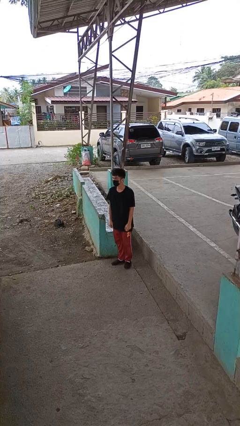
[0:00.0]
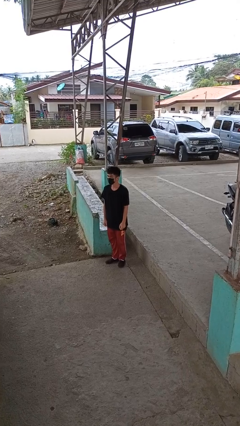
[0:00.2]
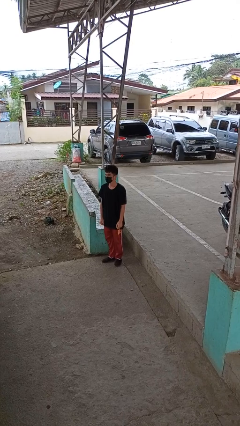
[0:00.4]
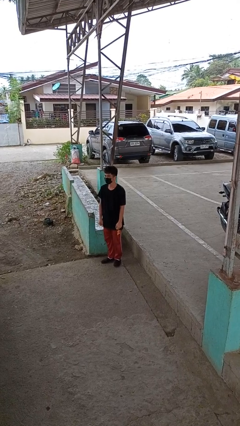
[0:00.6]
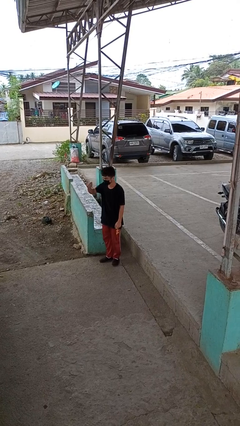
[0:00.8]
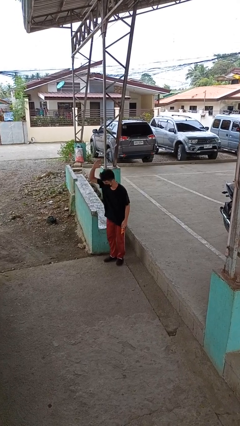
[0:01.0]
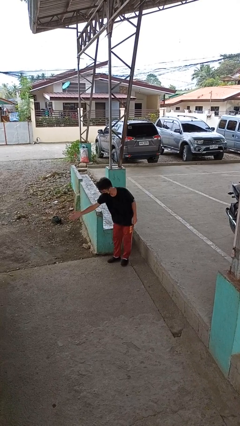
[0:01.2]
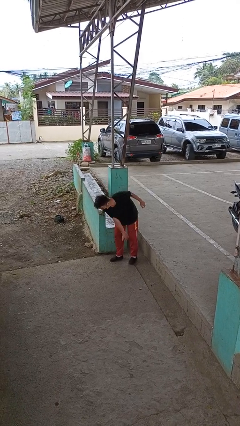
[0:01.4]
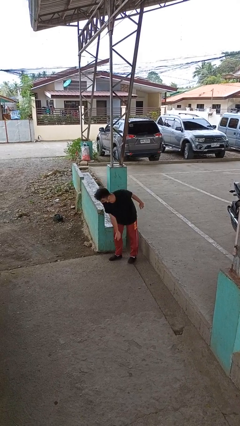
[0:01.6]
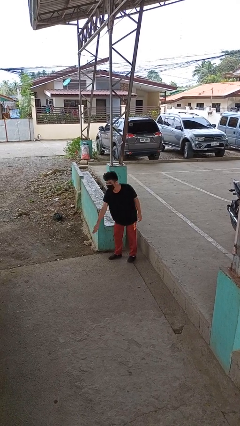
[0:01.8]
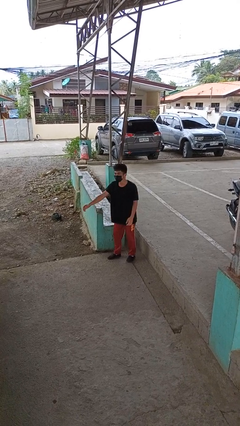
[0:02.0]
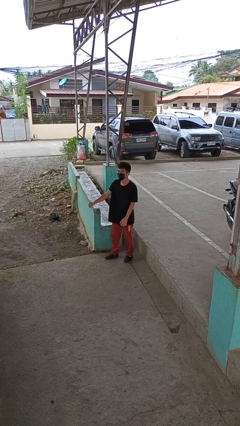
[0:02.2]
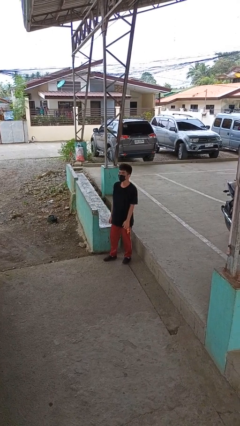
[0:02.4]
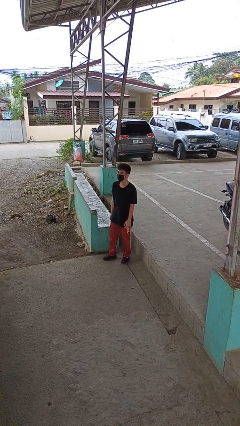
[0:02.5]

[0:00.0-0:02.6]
person karate chop

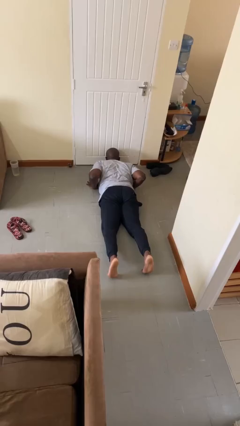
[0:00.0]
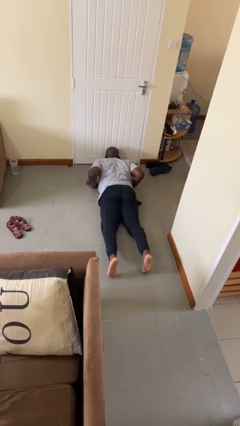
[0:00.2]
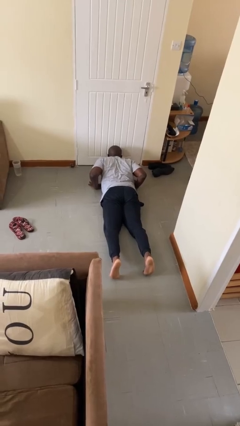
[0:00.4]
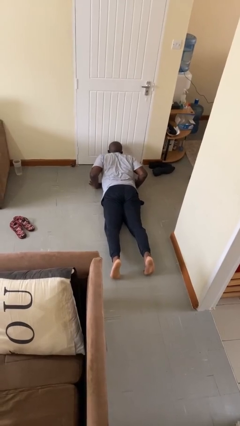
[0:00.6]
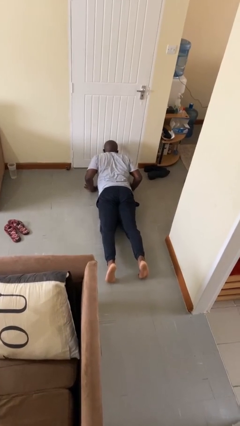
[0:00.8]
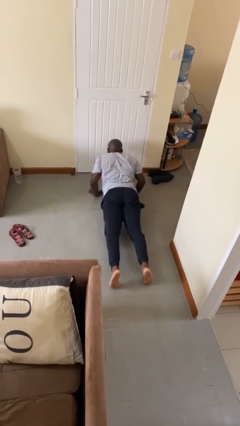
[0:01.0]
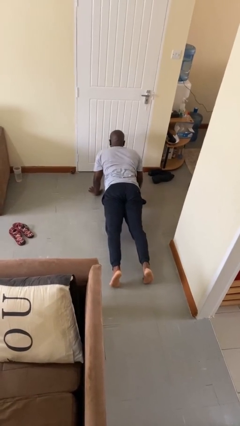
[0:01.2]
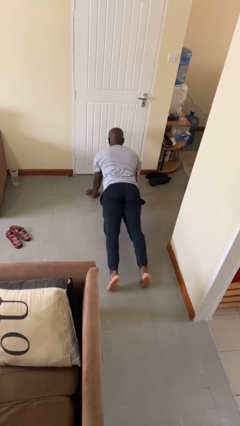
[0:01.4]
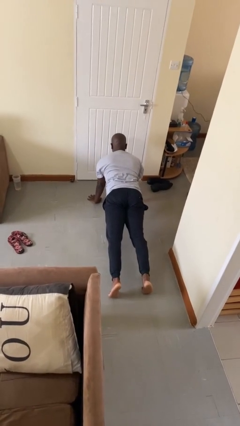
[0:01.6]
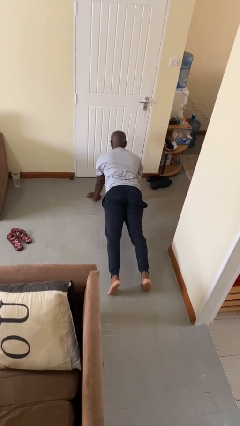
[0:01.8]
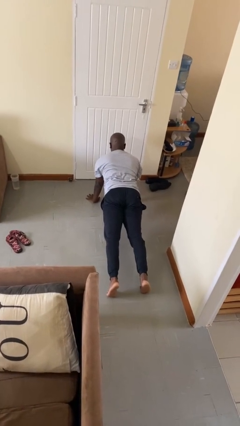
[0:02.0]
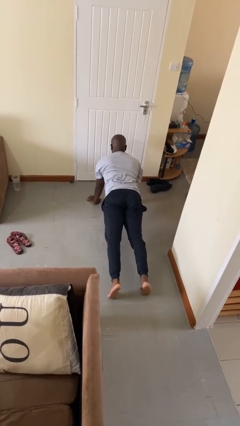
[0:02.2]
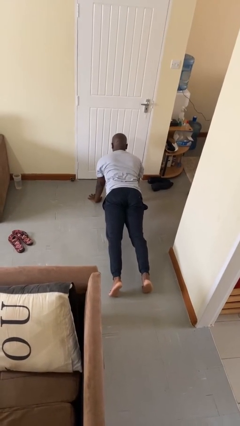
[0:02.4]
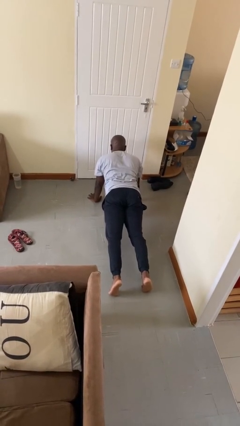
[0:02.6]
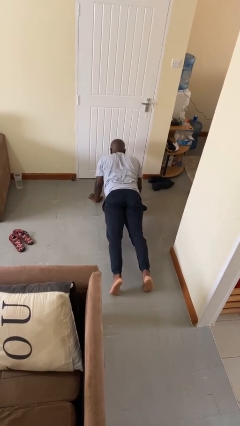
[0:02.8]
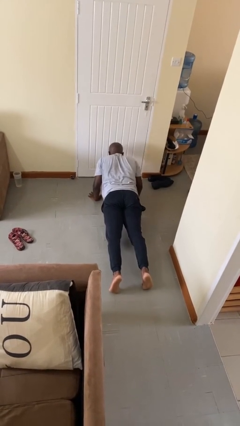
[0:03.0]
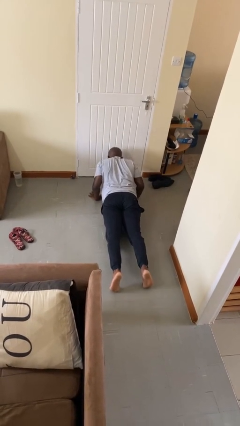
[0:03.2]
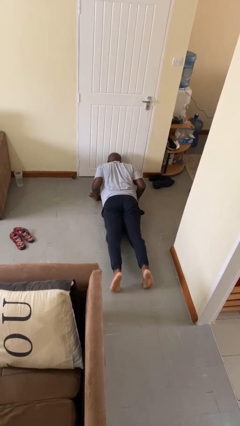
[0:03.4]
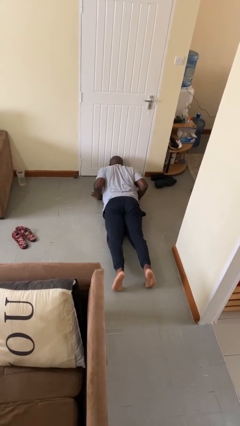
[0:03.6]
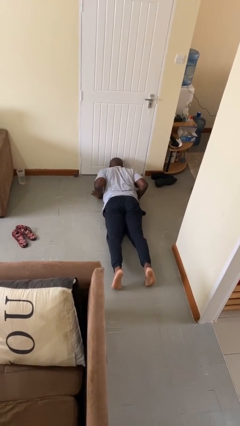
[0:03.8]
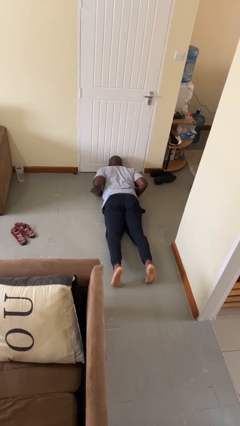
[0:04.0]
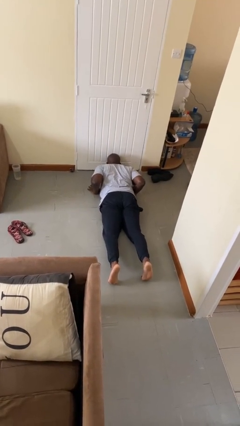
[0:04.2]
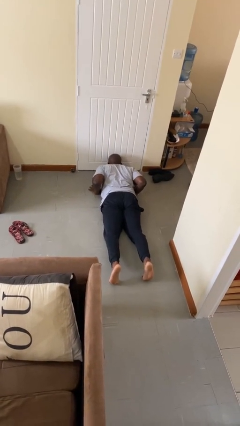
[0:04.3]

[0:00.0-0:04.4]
person exercises with pushup

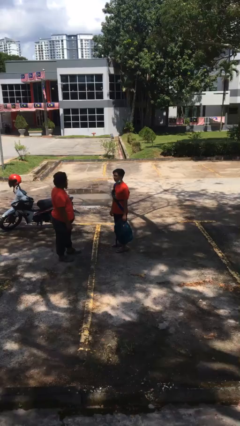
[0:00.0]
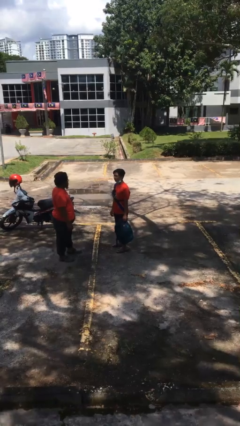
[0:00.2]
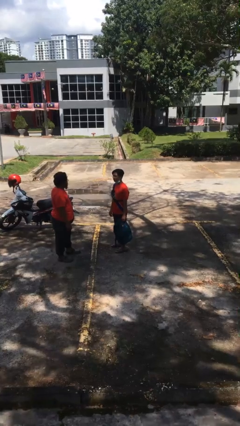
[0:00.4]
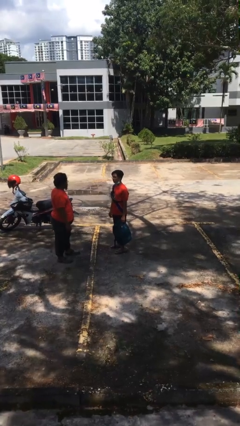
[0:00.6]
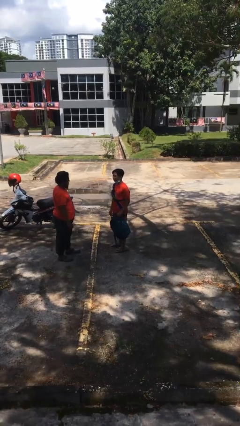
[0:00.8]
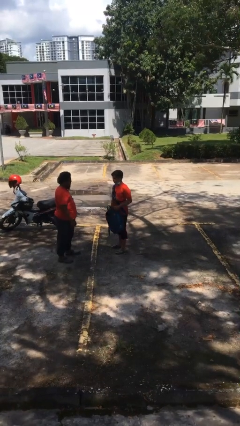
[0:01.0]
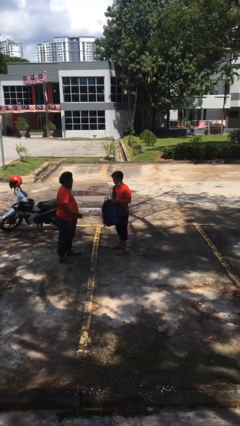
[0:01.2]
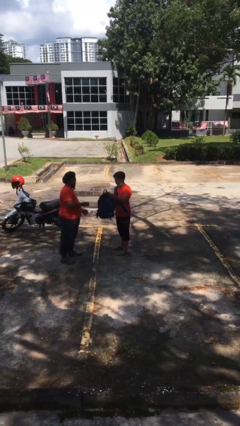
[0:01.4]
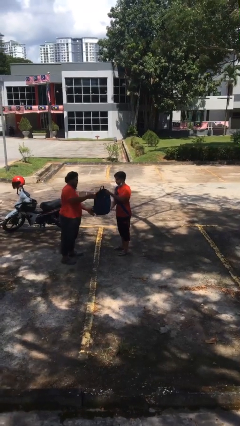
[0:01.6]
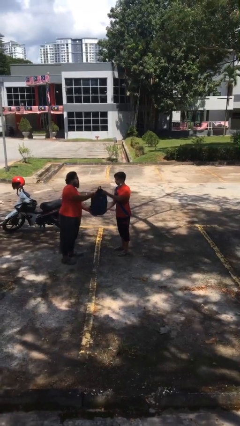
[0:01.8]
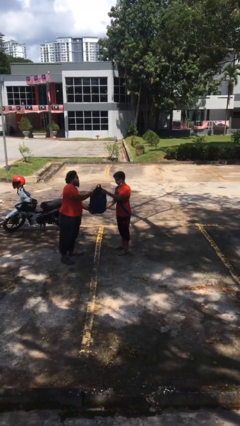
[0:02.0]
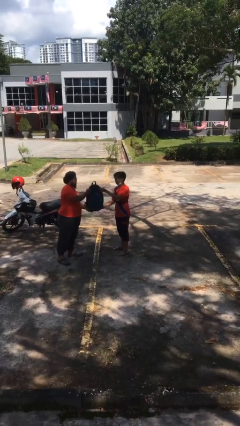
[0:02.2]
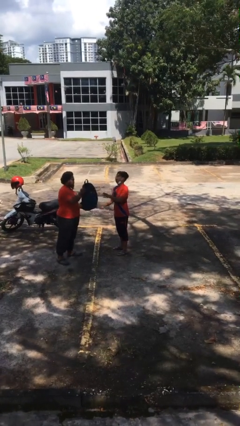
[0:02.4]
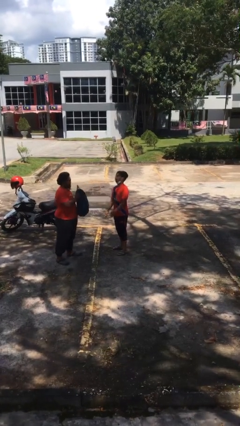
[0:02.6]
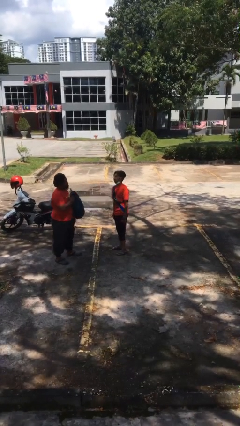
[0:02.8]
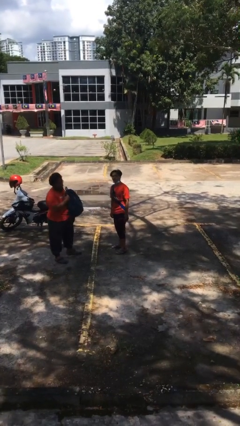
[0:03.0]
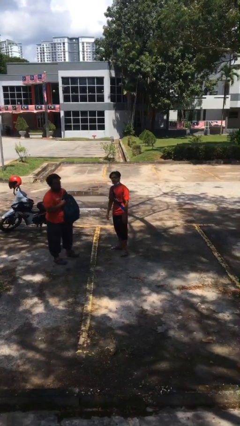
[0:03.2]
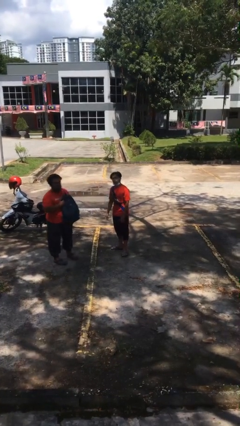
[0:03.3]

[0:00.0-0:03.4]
person transfers object to person

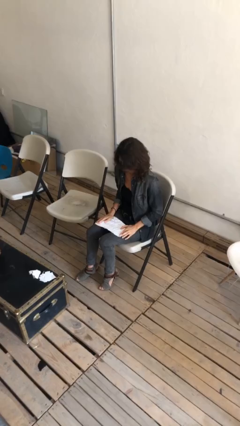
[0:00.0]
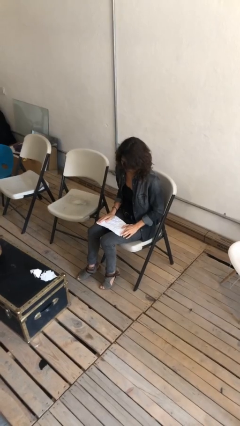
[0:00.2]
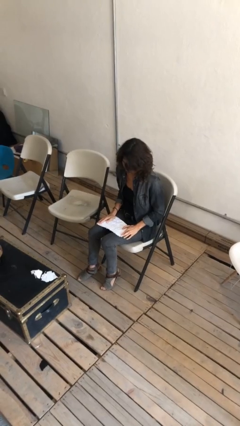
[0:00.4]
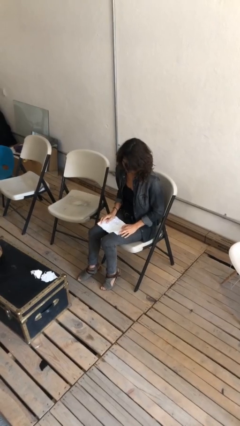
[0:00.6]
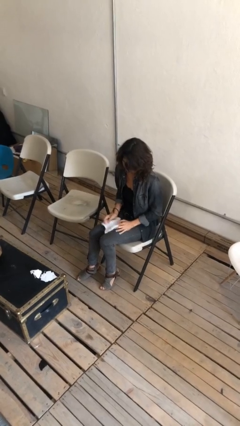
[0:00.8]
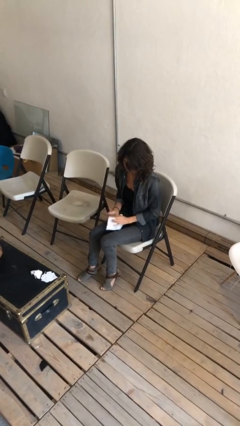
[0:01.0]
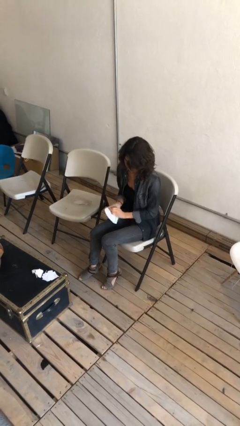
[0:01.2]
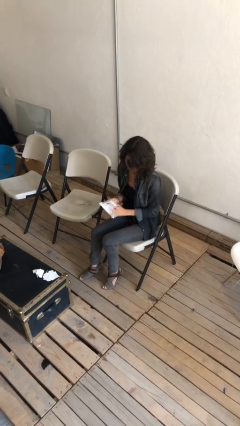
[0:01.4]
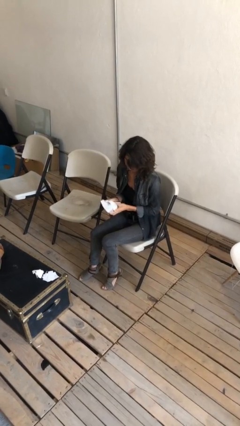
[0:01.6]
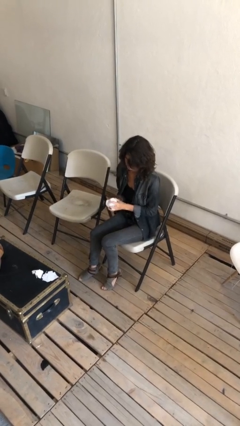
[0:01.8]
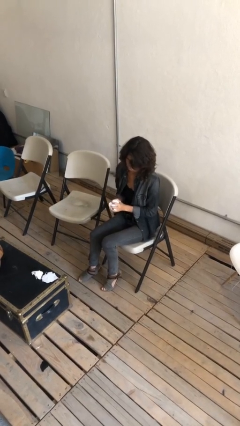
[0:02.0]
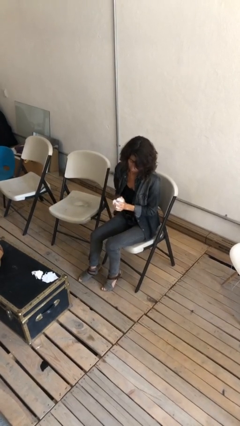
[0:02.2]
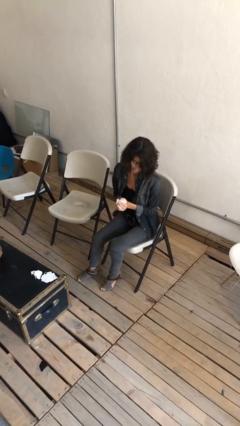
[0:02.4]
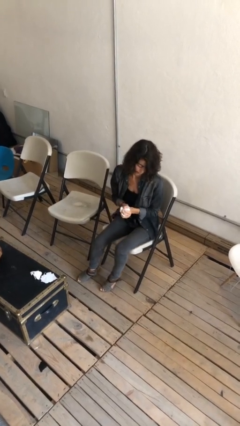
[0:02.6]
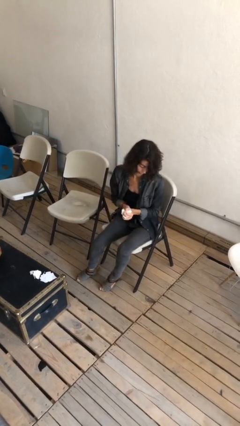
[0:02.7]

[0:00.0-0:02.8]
person crumples paper

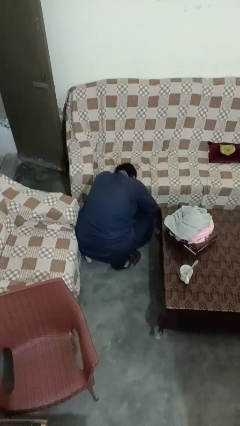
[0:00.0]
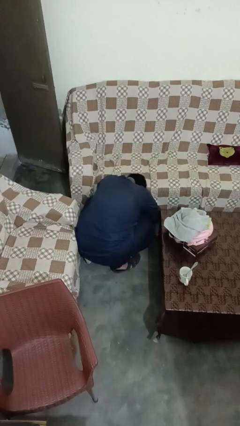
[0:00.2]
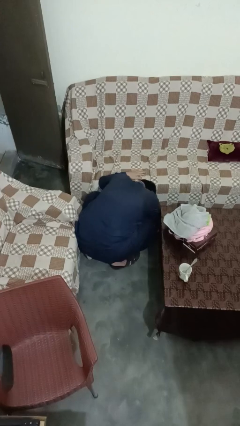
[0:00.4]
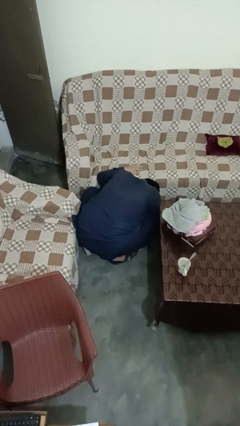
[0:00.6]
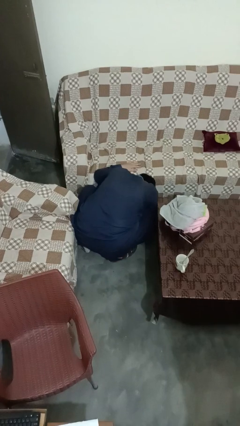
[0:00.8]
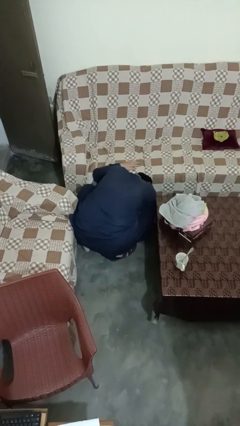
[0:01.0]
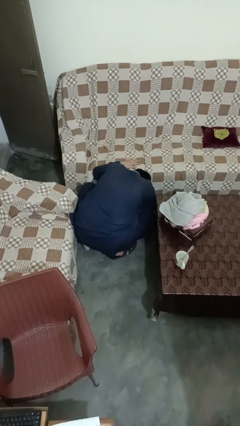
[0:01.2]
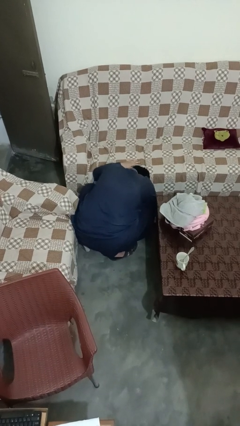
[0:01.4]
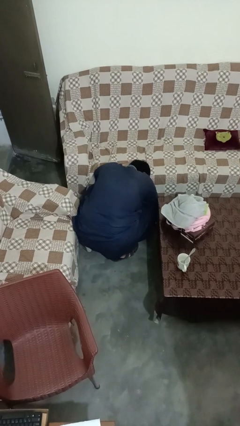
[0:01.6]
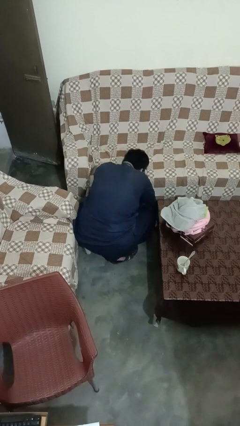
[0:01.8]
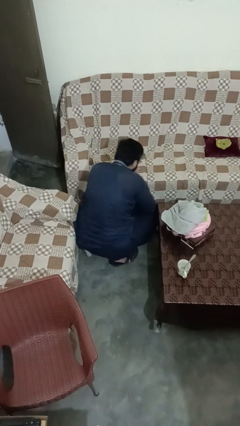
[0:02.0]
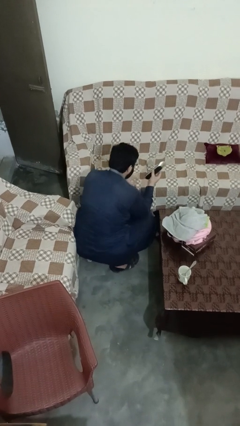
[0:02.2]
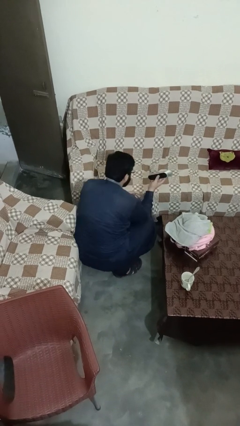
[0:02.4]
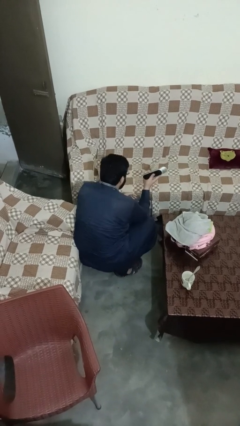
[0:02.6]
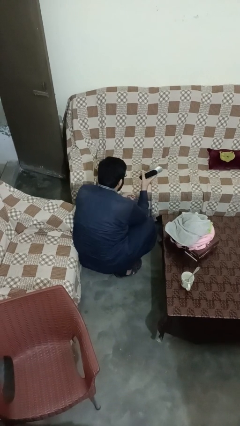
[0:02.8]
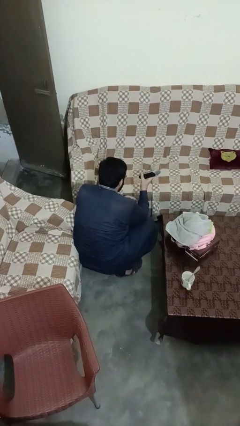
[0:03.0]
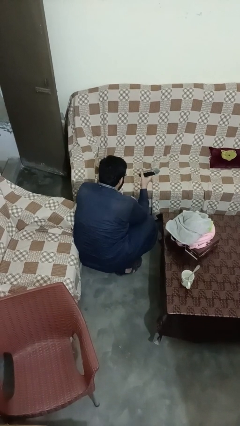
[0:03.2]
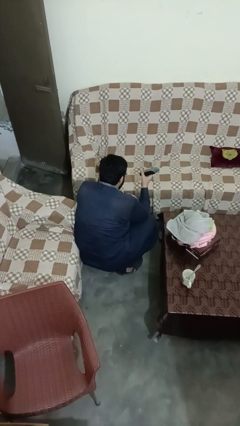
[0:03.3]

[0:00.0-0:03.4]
person searches under couch

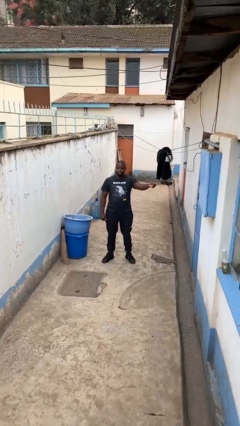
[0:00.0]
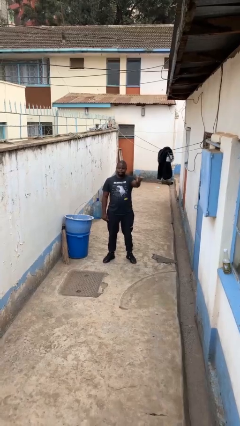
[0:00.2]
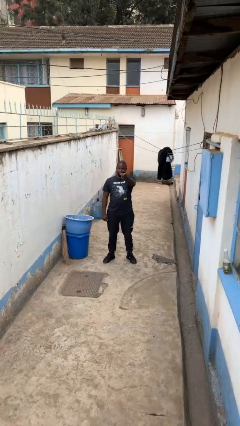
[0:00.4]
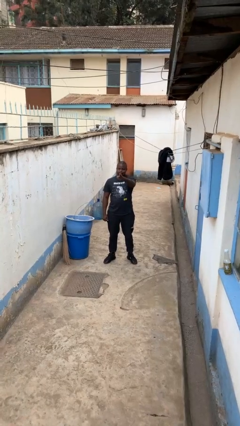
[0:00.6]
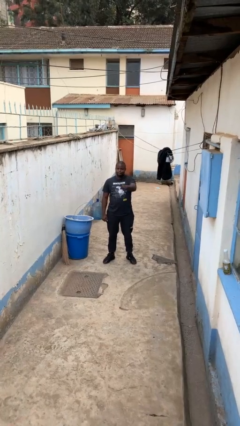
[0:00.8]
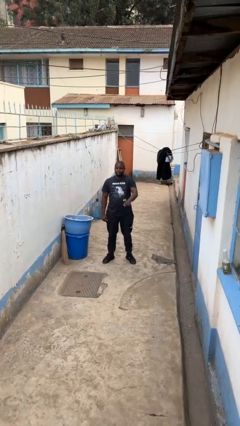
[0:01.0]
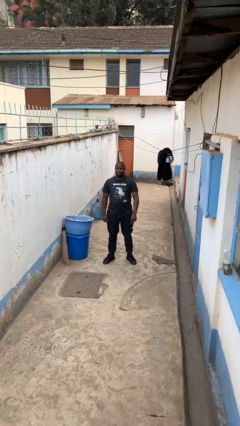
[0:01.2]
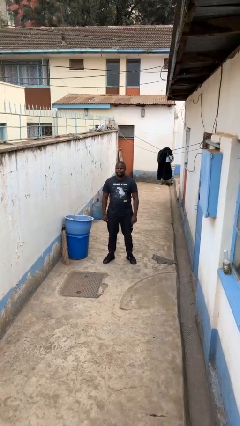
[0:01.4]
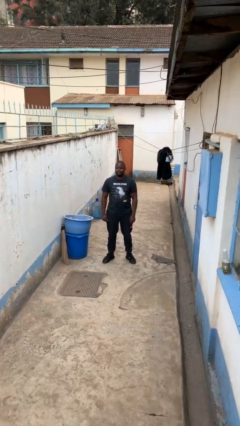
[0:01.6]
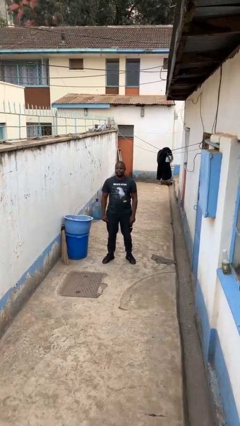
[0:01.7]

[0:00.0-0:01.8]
person gestures swipe right
